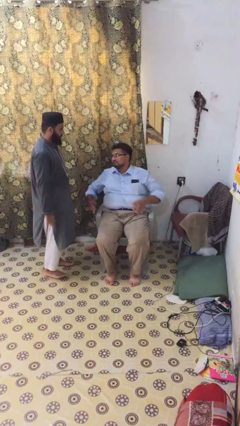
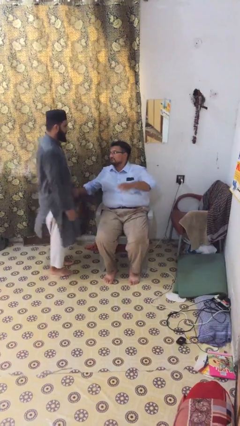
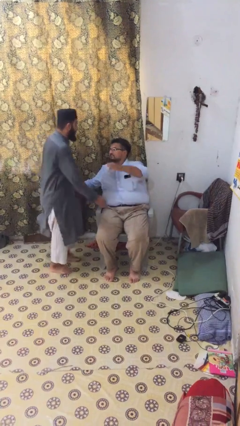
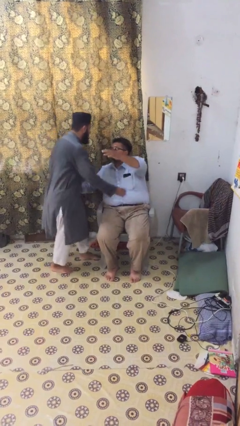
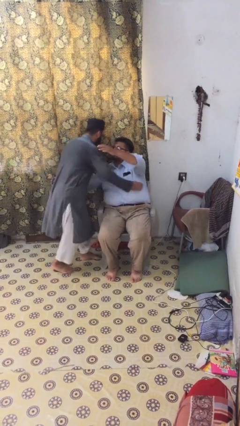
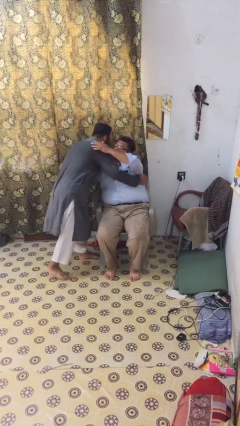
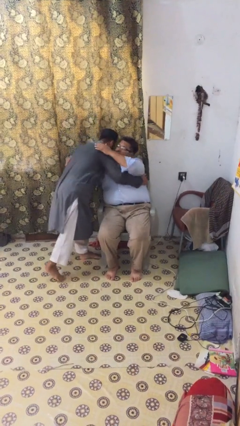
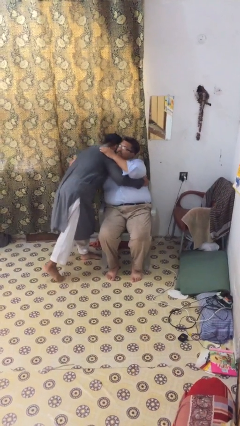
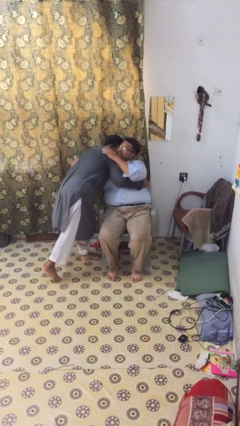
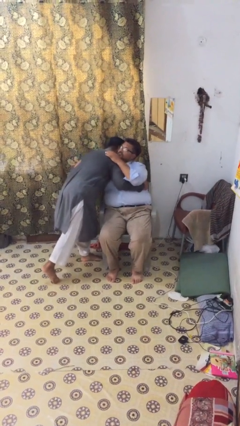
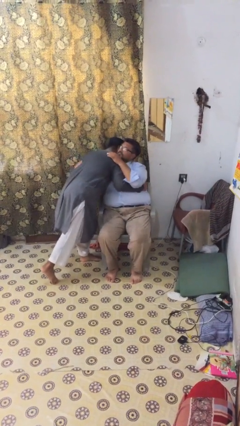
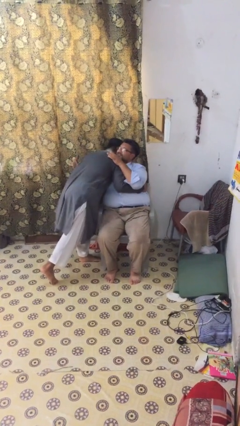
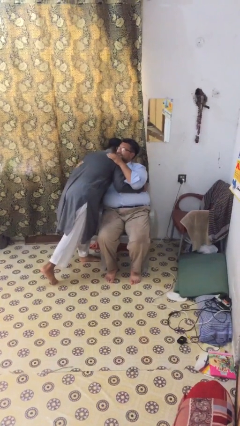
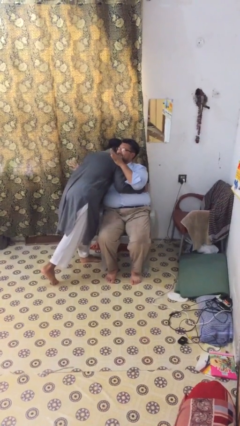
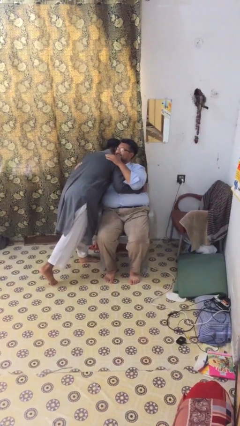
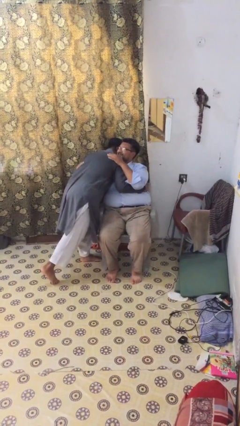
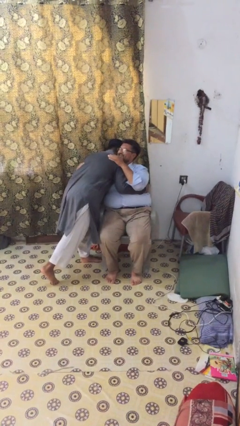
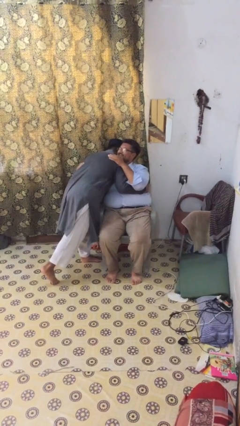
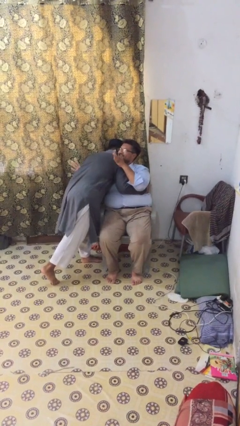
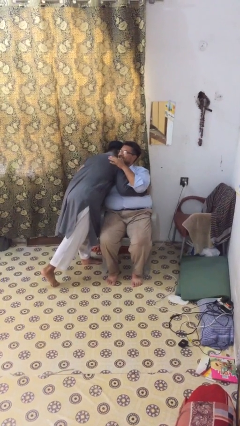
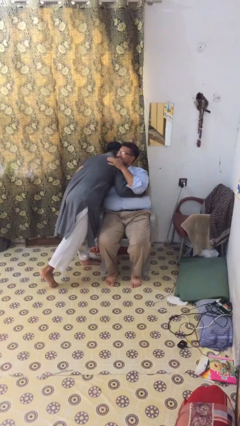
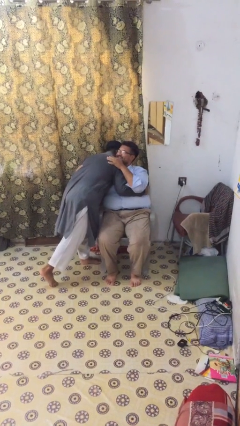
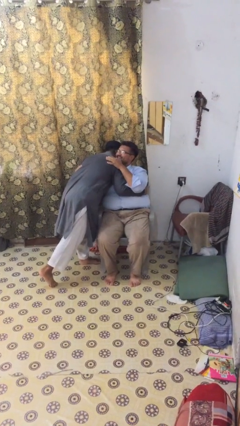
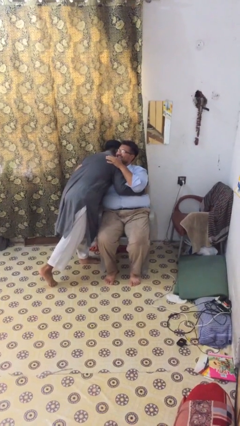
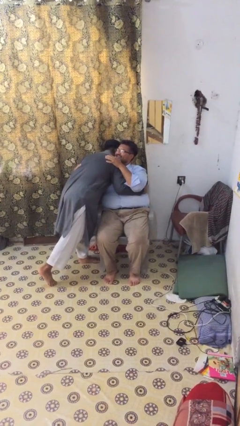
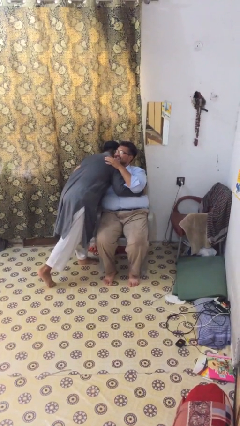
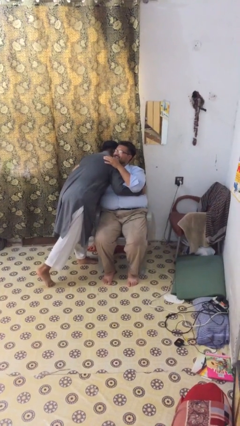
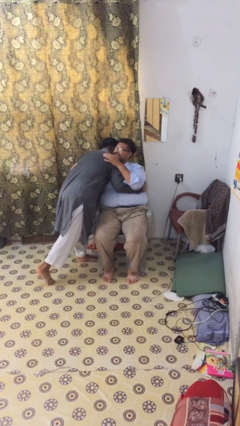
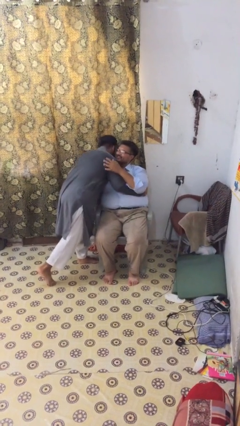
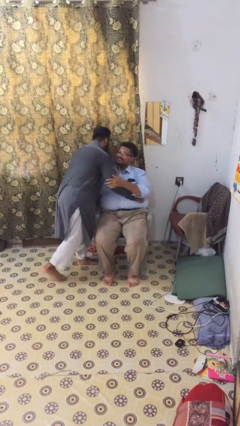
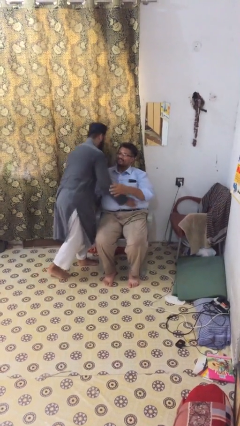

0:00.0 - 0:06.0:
person embraces person

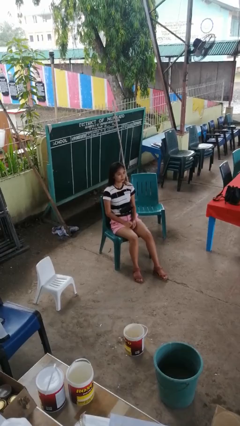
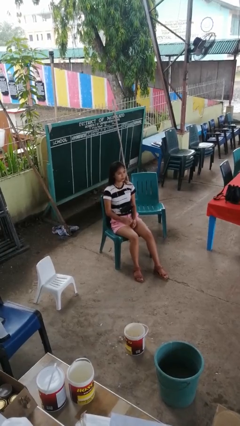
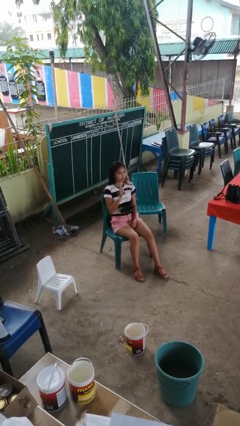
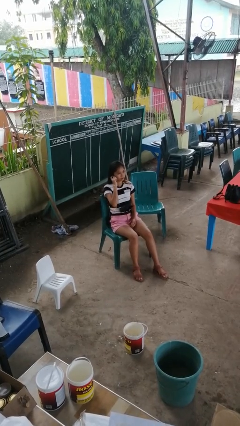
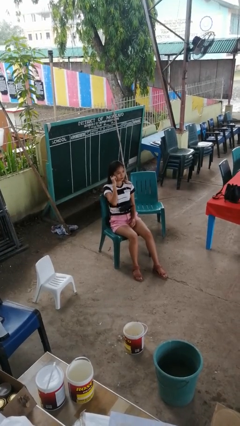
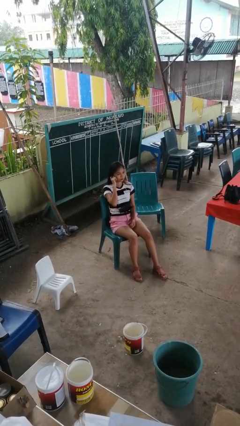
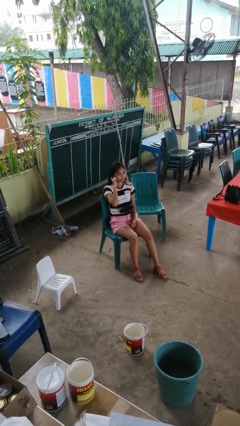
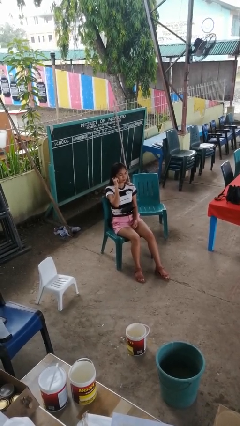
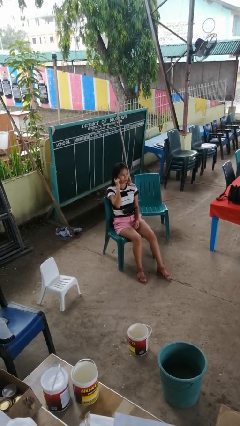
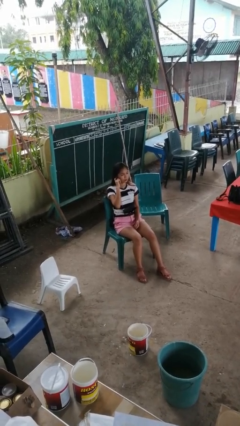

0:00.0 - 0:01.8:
person gestures listen closely

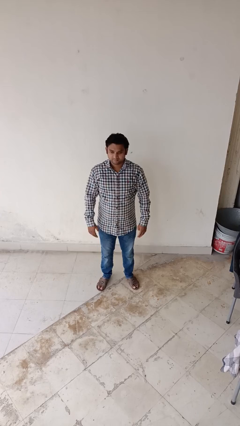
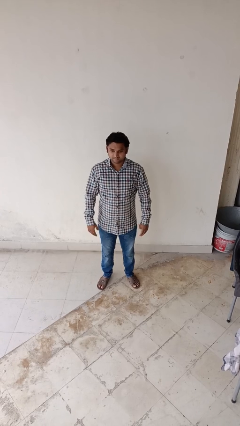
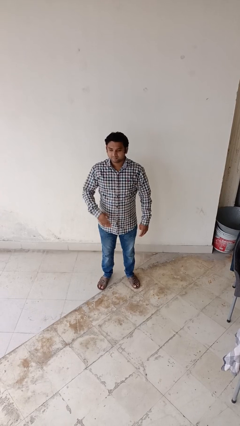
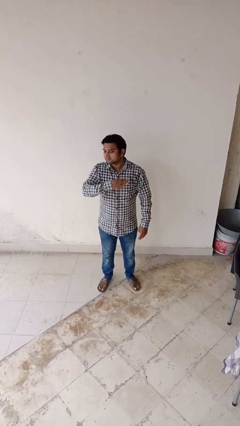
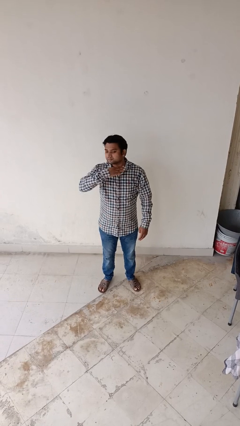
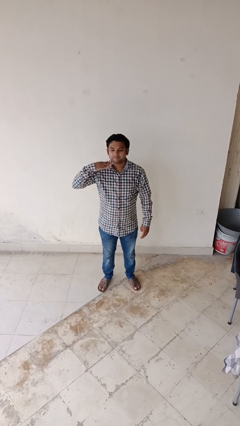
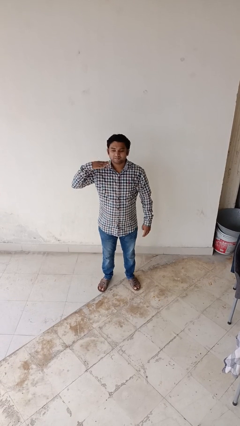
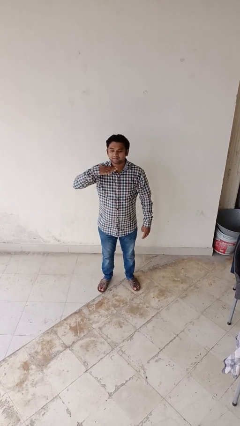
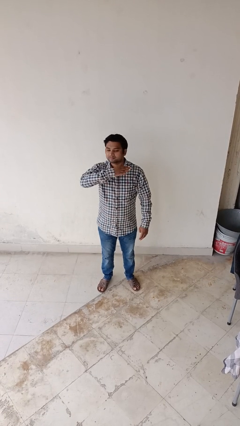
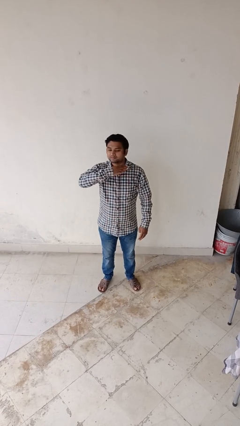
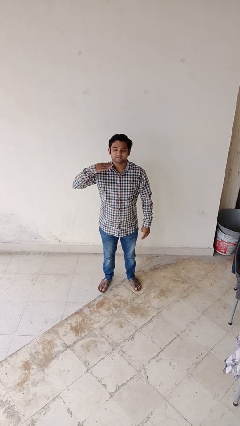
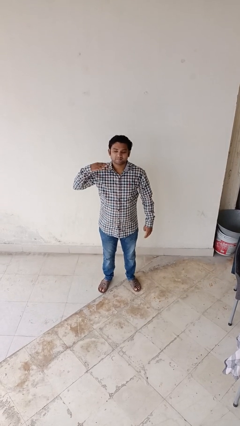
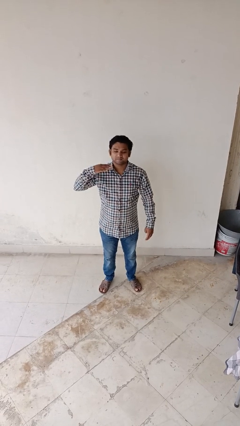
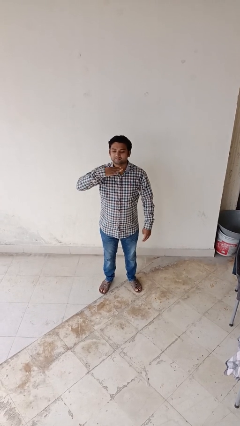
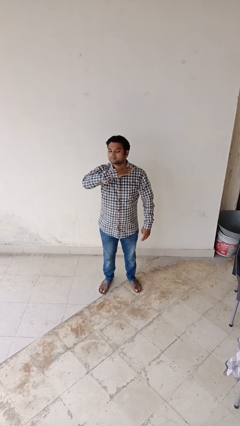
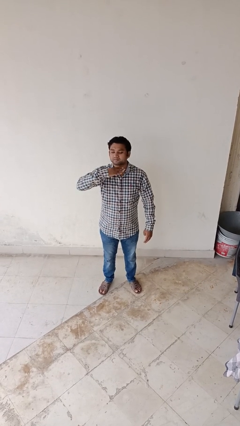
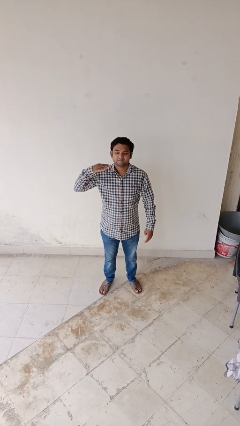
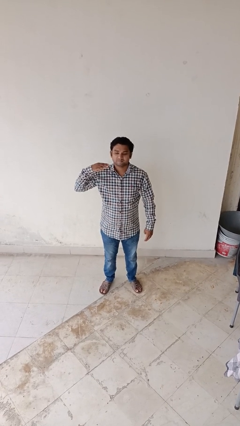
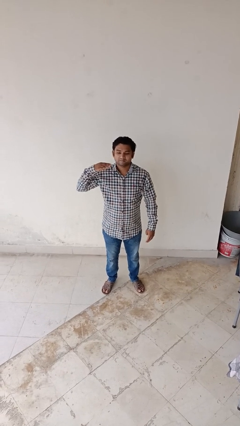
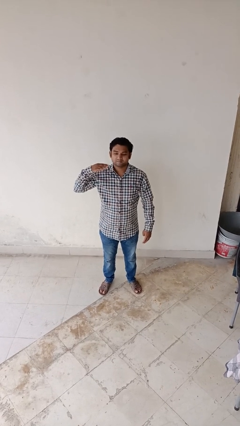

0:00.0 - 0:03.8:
person gestures cut

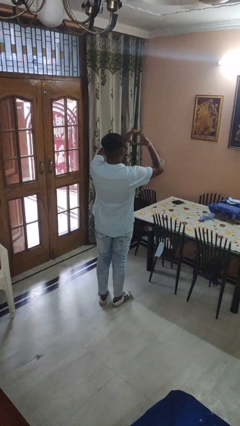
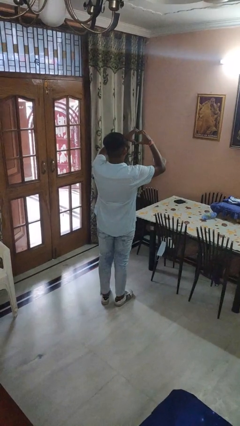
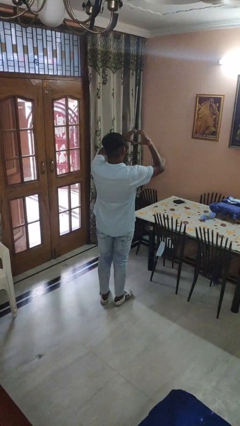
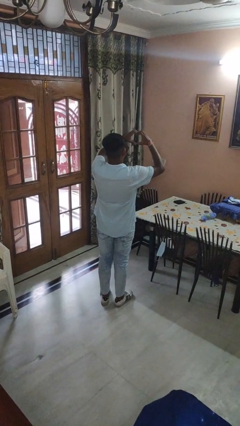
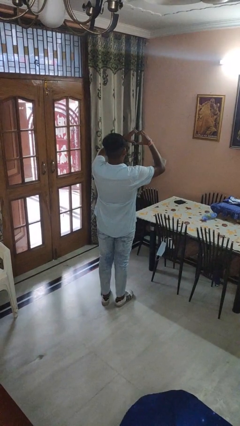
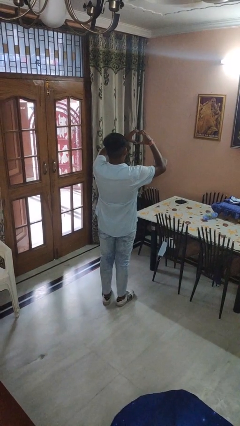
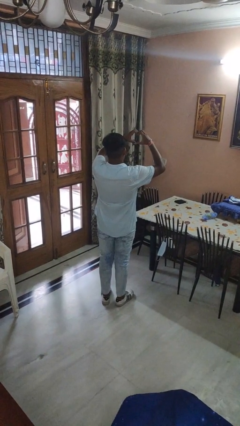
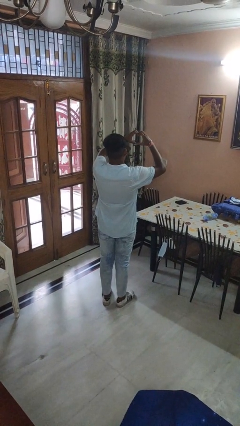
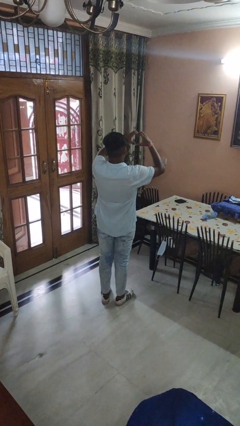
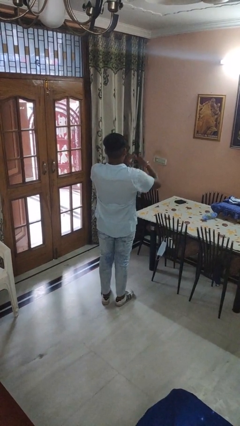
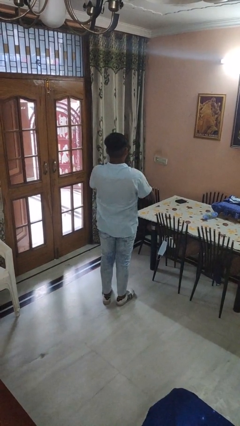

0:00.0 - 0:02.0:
person gestures heart

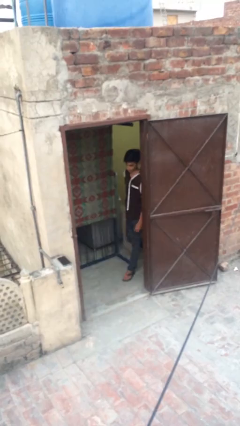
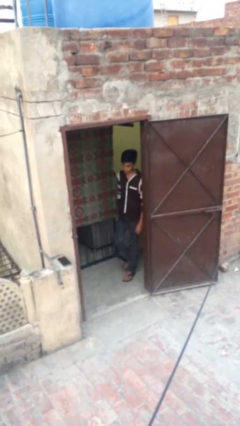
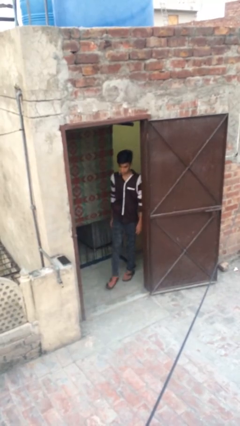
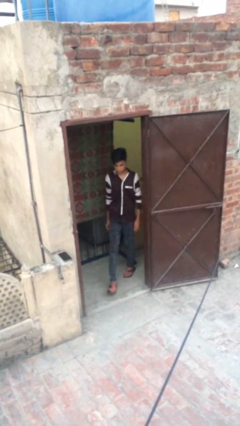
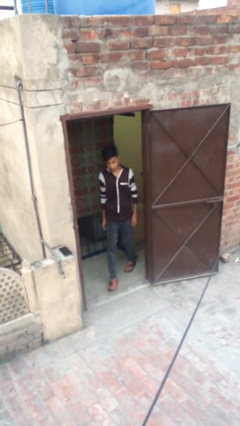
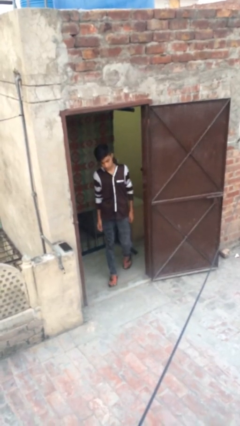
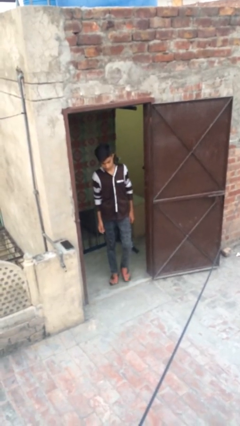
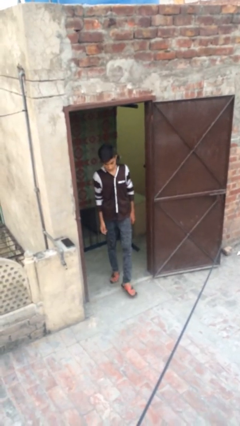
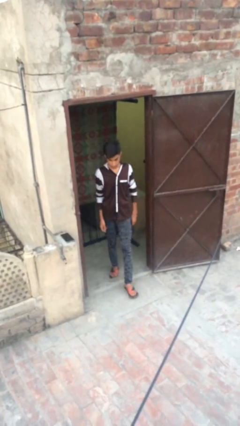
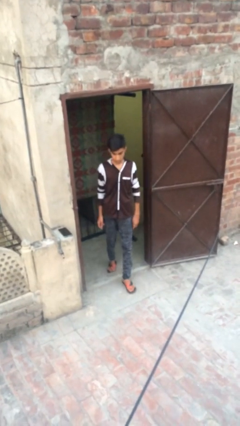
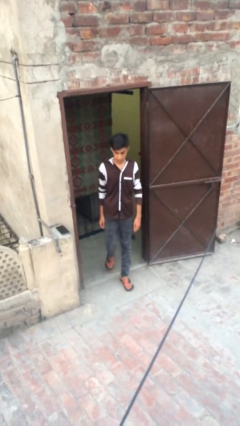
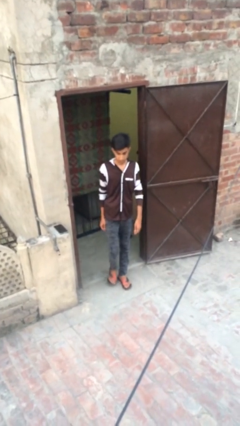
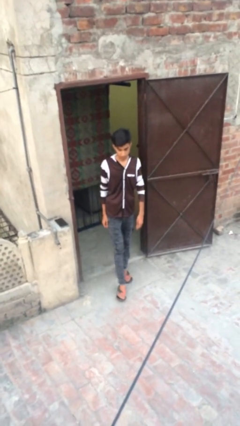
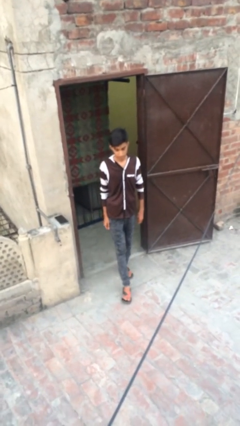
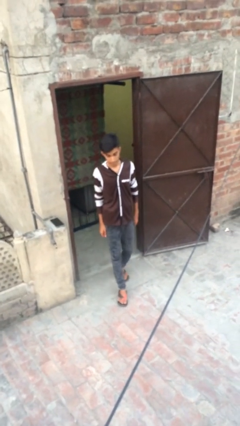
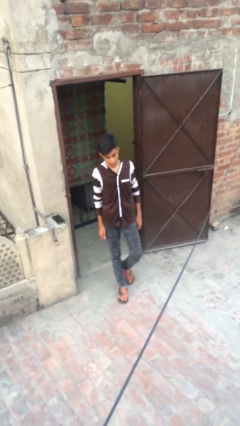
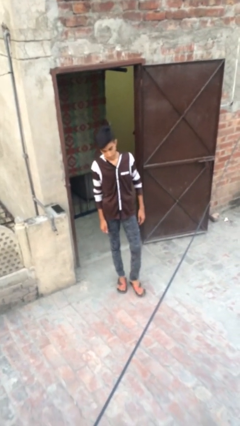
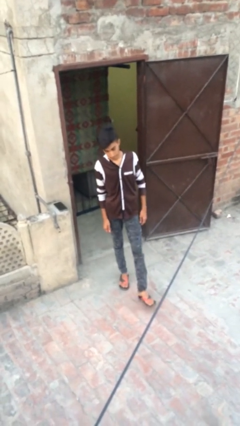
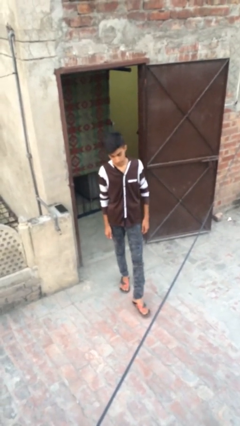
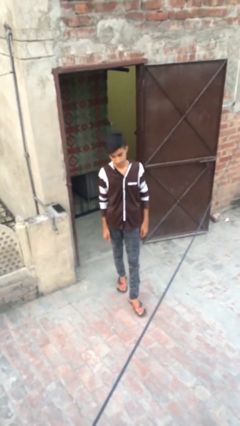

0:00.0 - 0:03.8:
person enters scene through structure
